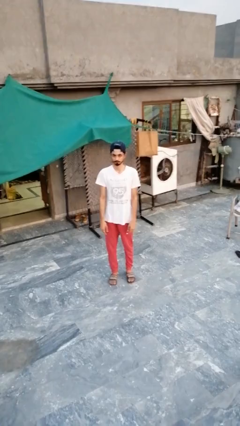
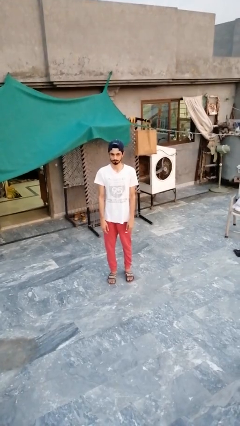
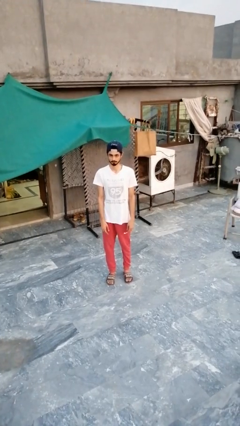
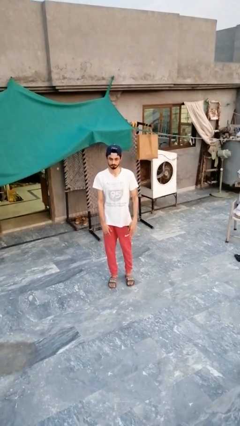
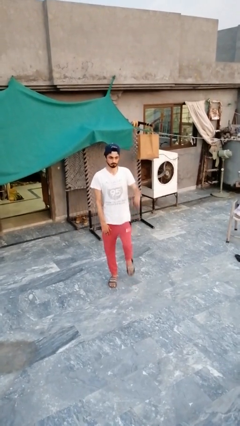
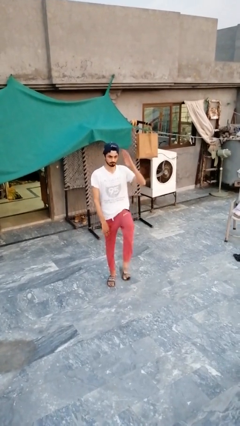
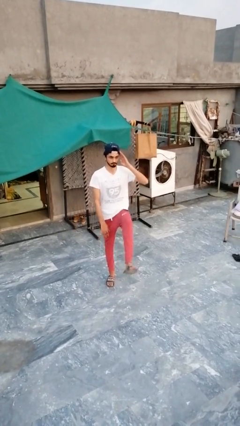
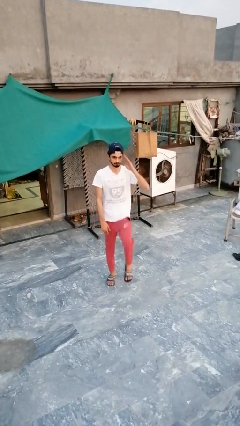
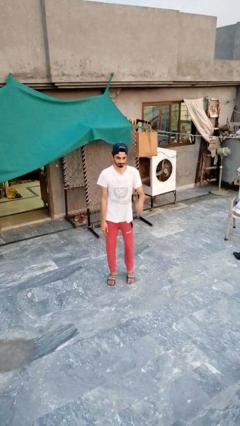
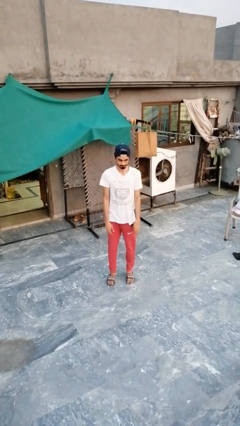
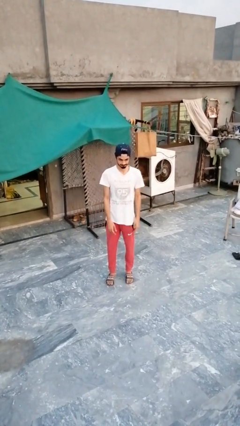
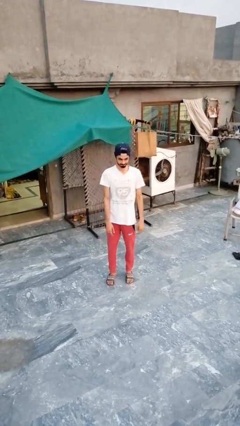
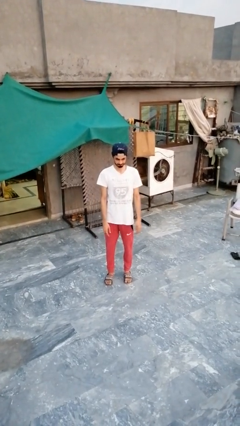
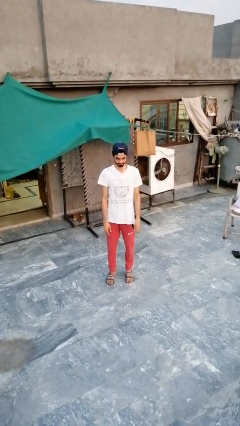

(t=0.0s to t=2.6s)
person salutes

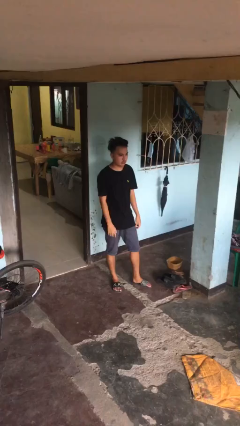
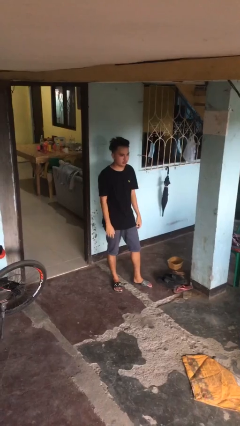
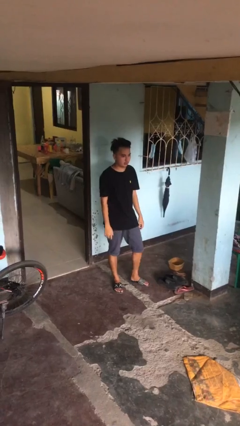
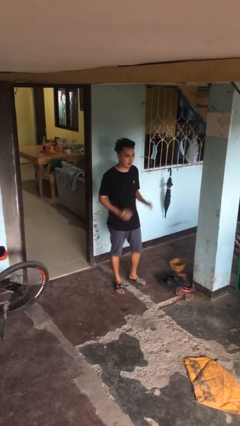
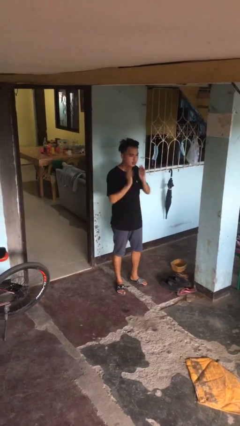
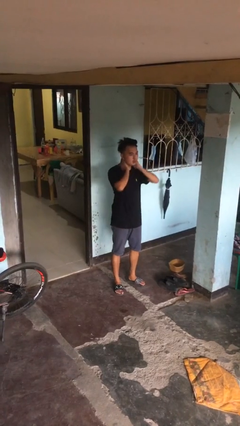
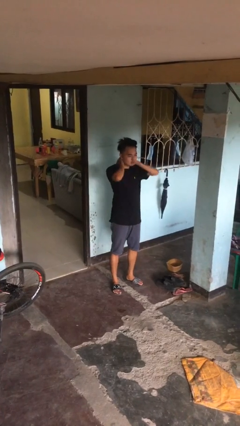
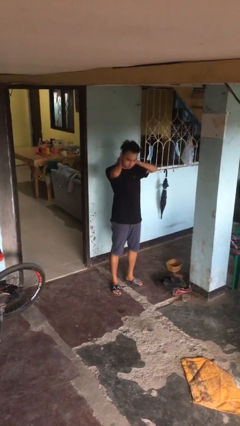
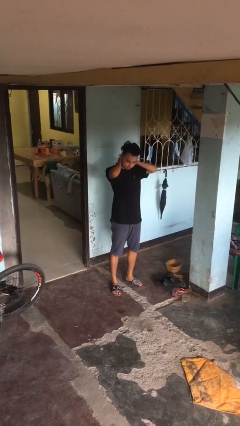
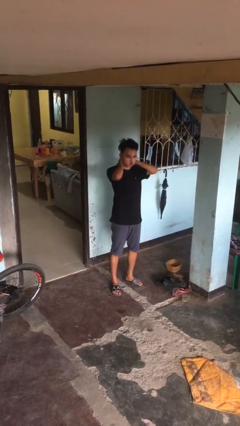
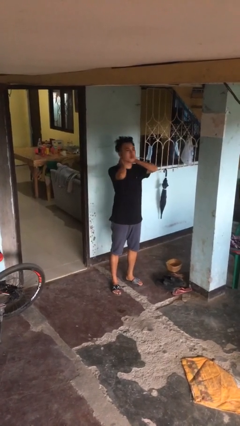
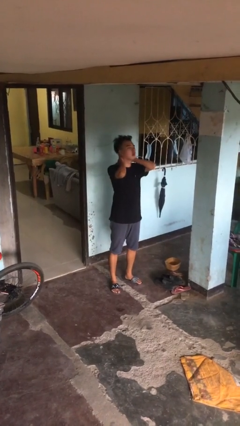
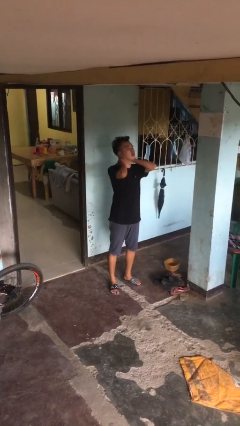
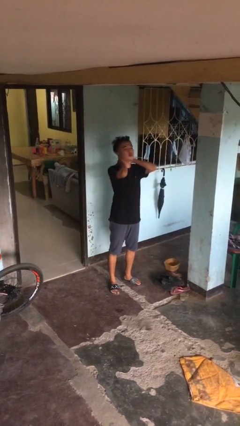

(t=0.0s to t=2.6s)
person rubs neck

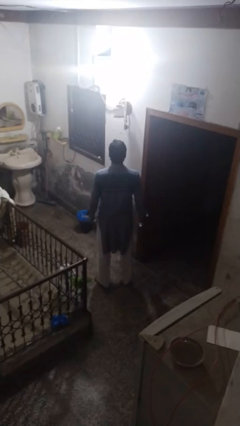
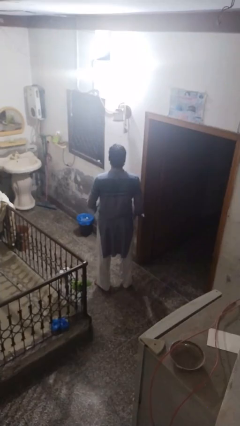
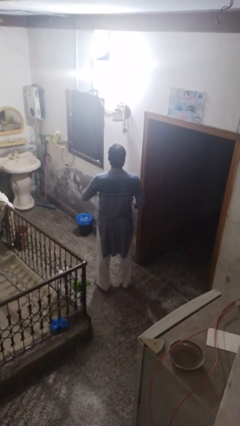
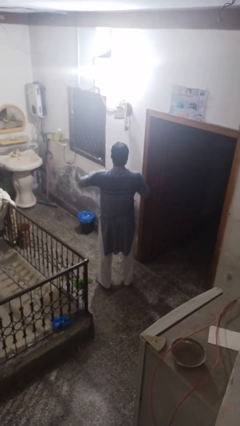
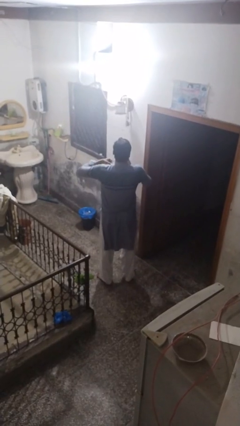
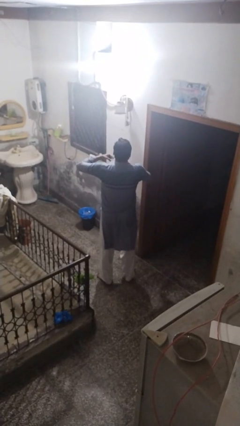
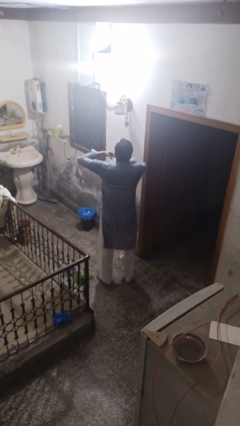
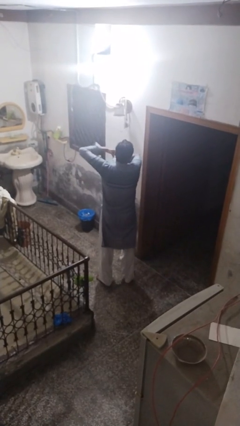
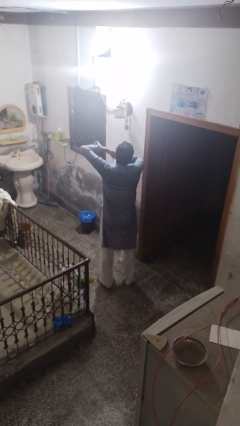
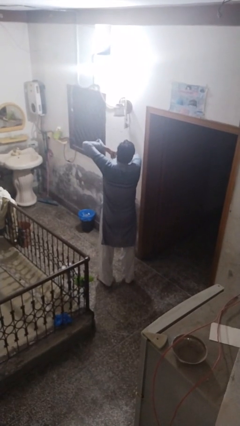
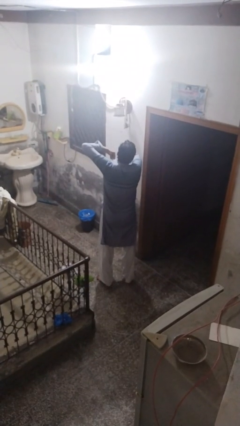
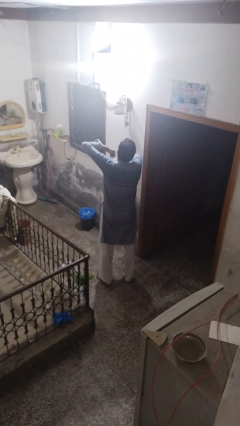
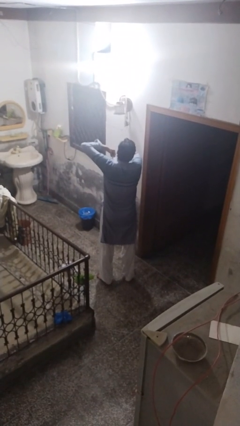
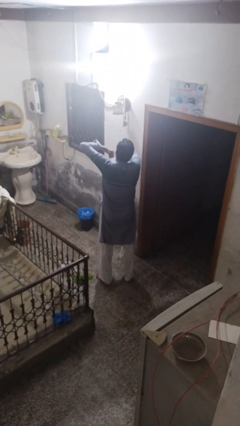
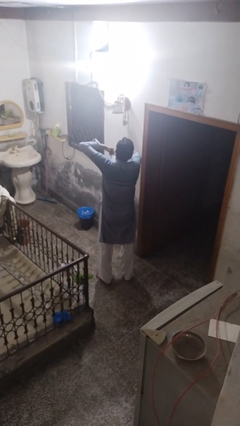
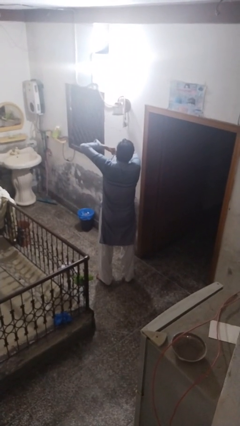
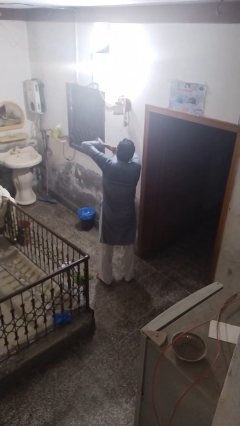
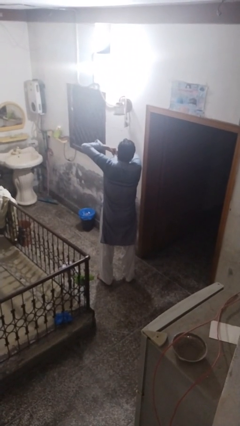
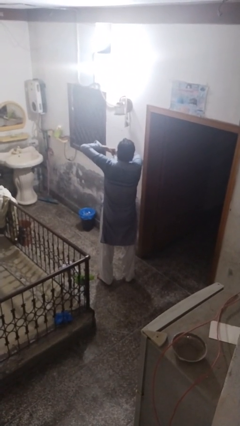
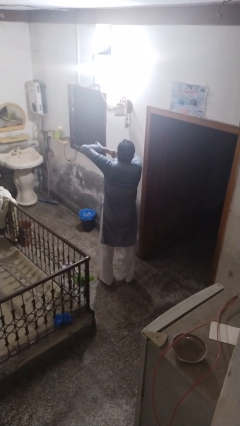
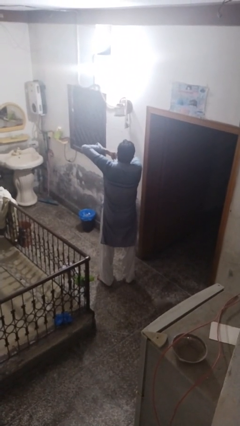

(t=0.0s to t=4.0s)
person applies deodorant

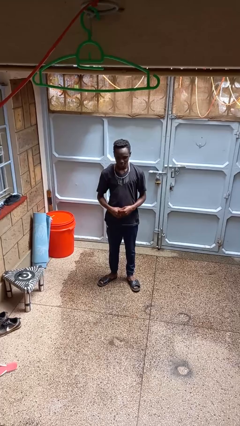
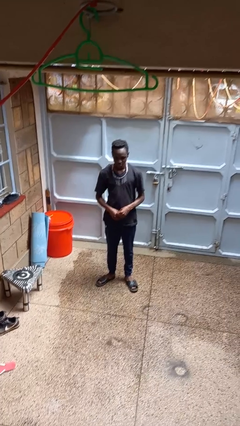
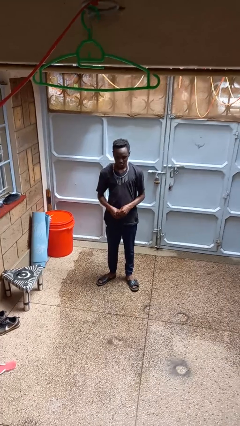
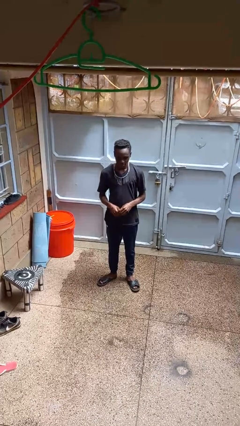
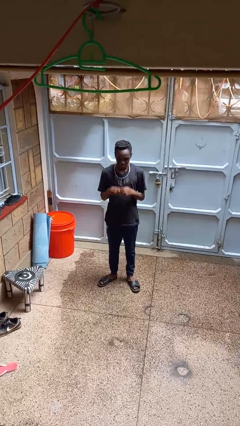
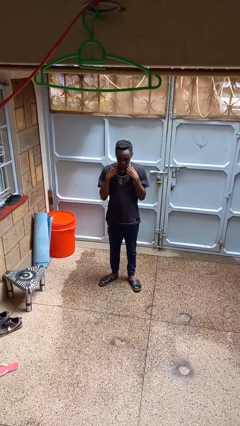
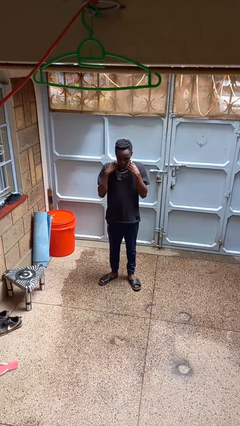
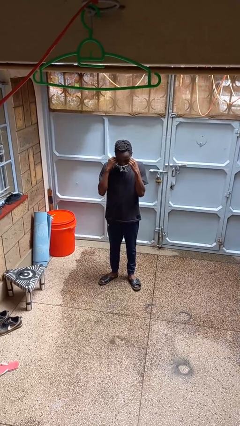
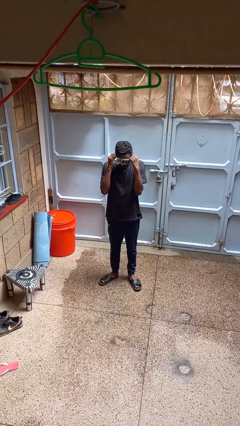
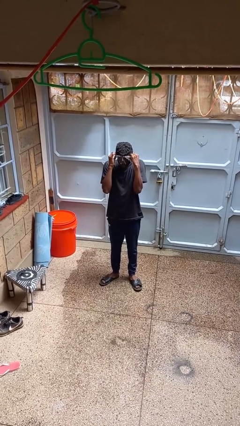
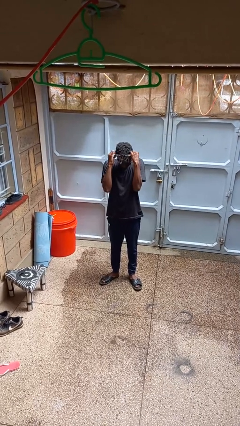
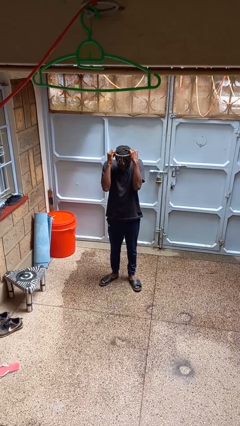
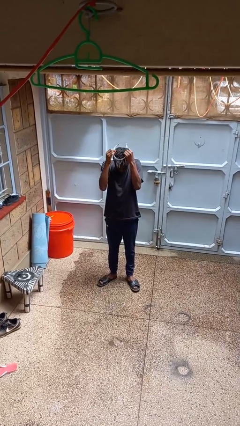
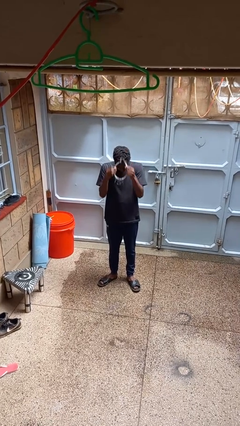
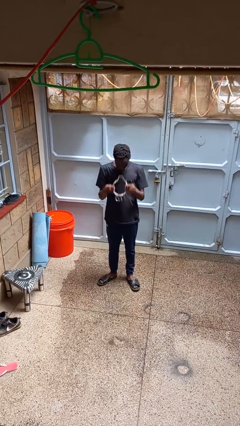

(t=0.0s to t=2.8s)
person takes off necklace

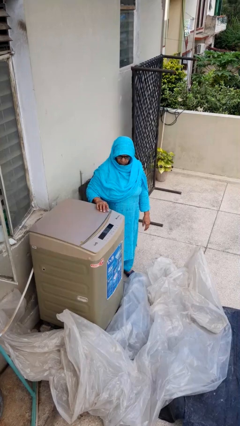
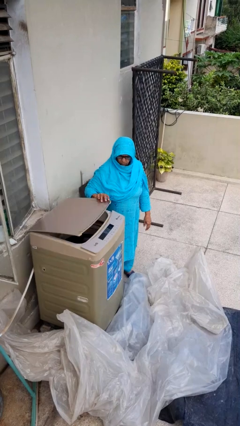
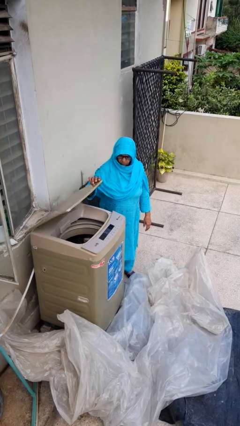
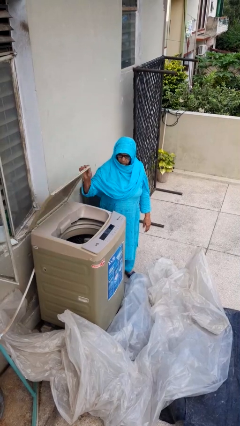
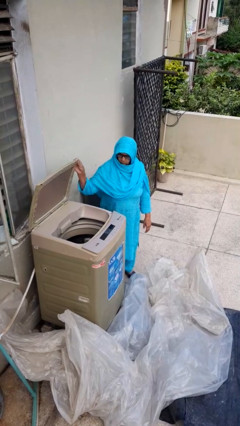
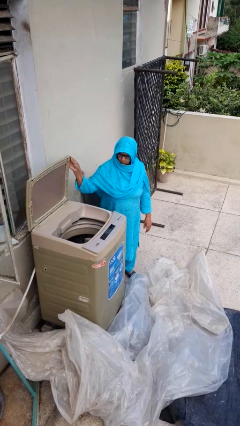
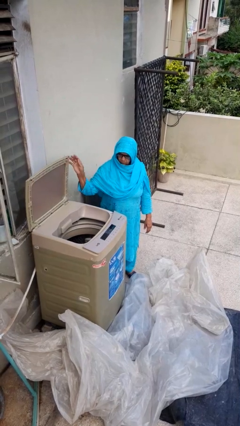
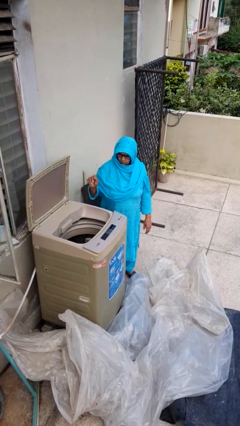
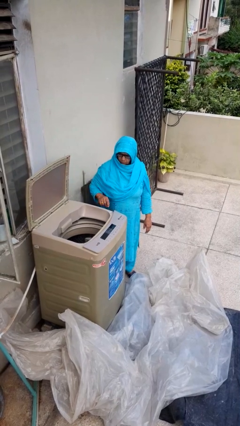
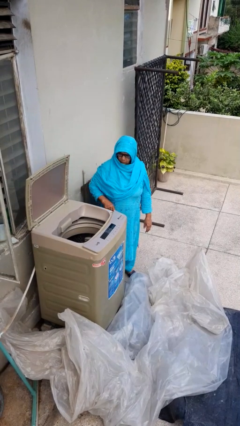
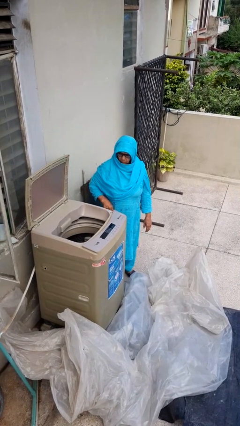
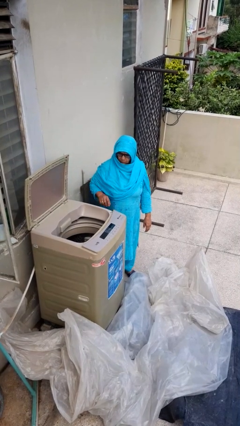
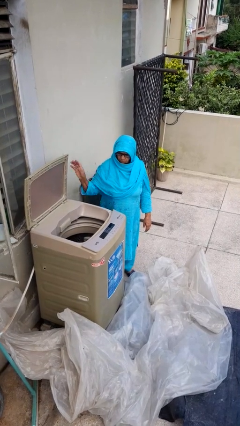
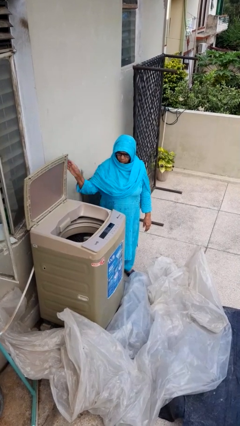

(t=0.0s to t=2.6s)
person opens clothes washer

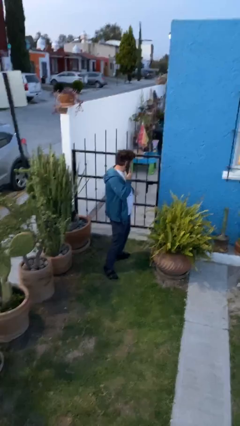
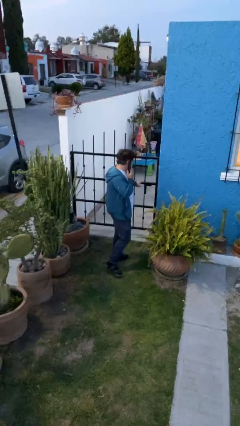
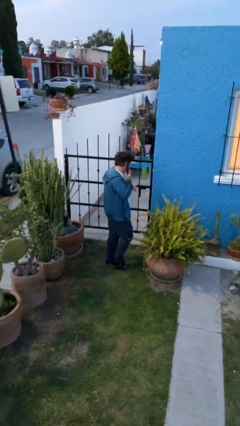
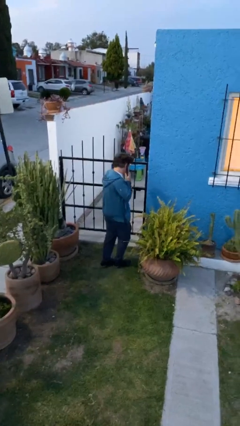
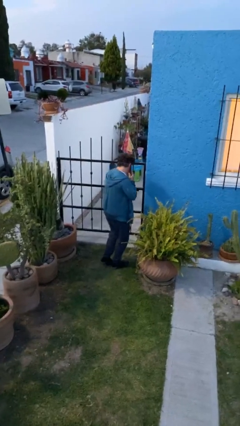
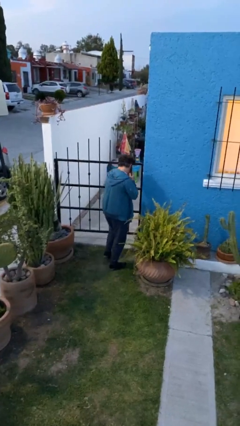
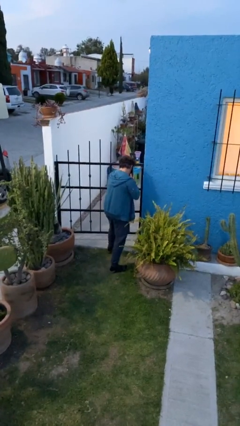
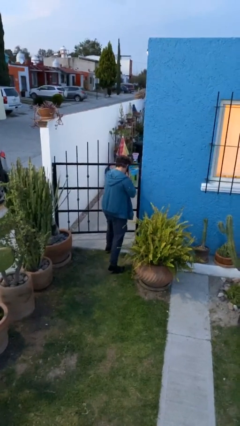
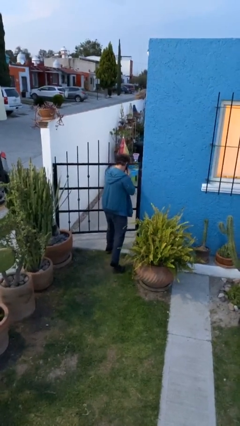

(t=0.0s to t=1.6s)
person opens facility door

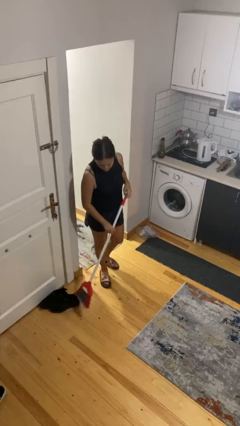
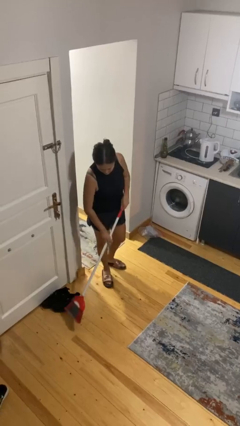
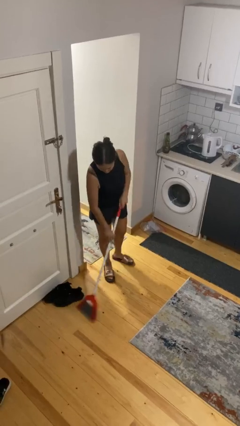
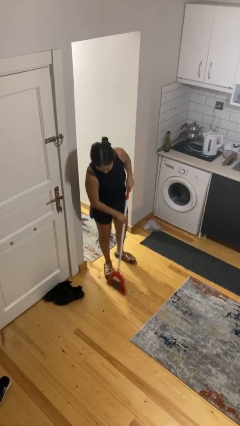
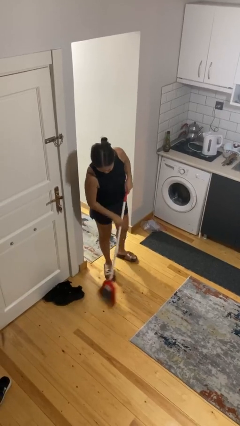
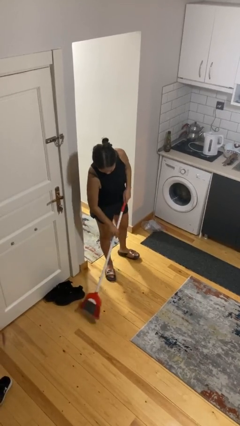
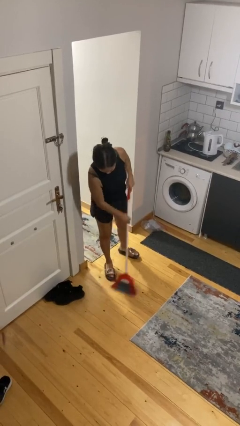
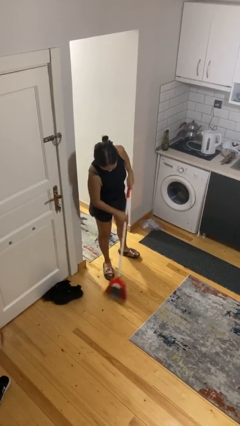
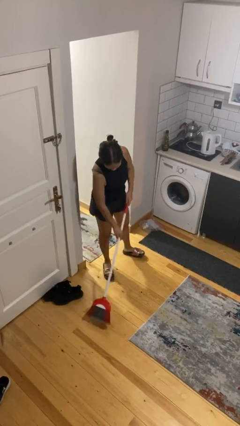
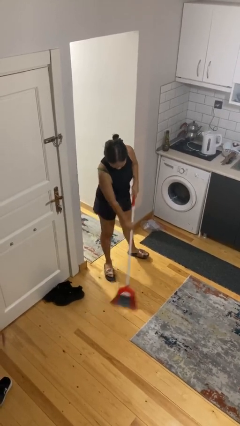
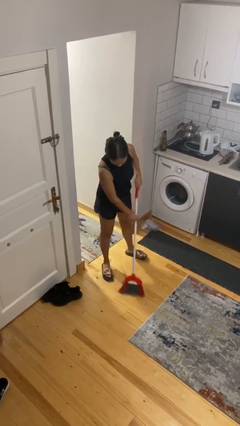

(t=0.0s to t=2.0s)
person sweeps floor
